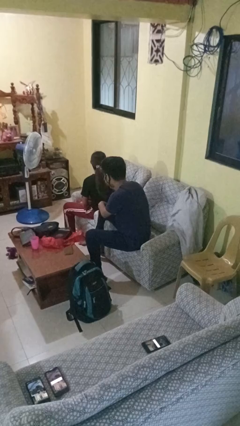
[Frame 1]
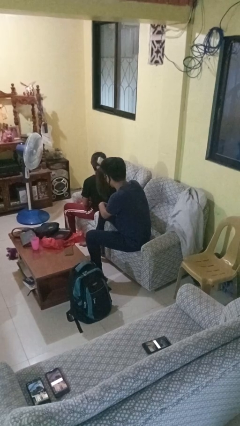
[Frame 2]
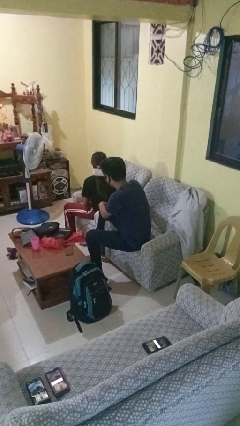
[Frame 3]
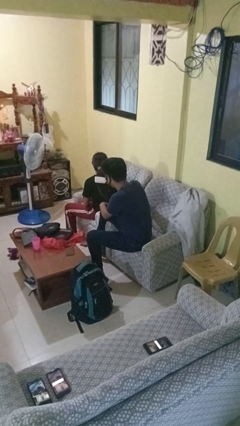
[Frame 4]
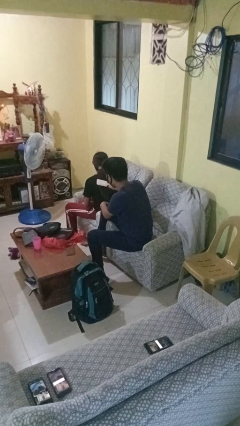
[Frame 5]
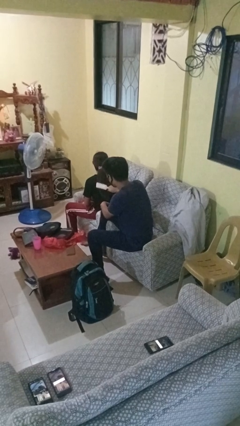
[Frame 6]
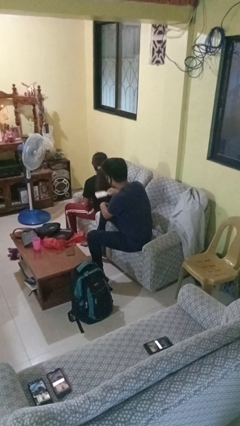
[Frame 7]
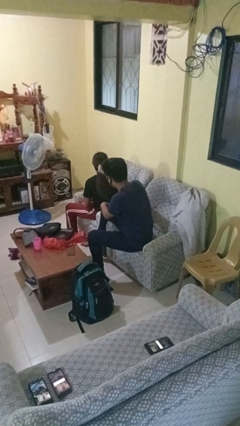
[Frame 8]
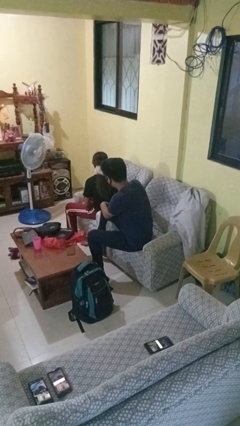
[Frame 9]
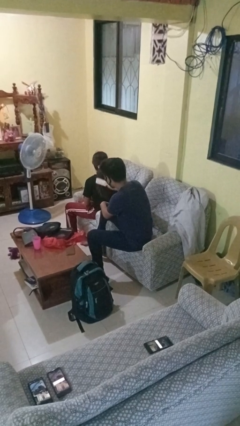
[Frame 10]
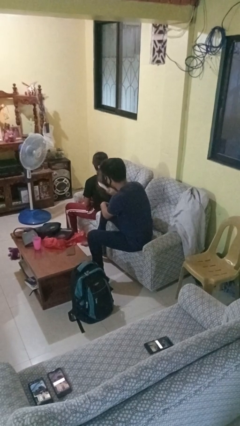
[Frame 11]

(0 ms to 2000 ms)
person brushes hair of person

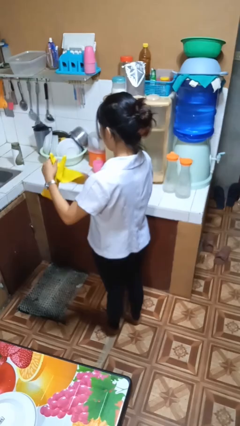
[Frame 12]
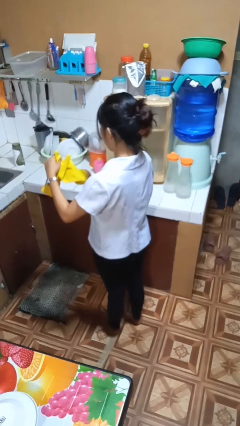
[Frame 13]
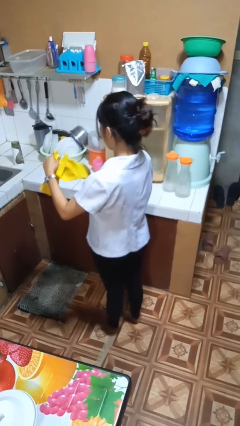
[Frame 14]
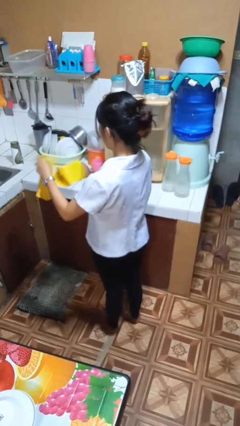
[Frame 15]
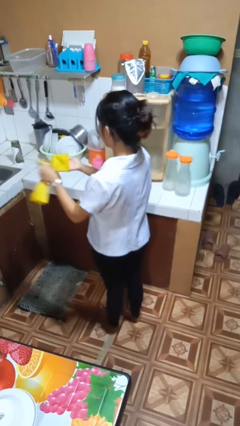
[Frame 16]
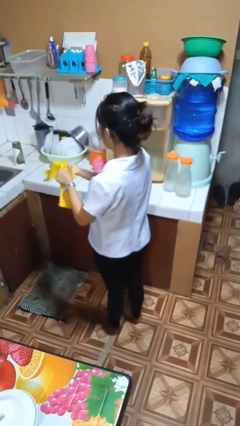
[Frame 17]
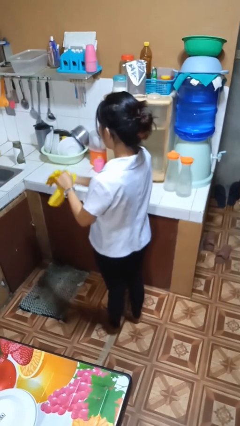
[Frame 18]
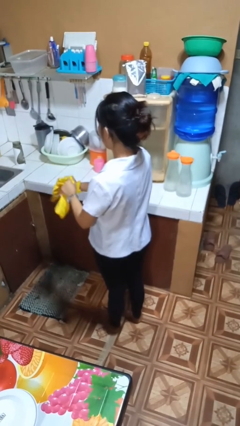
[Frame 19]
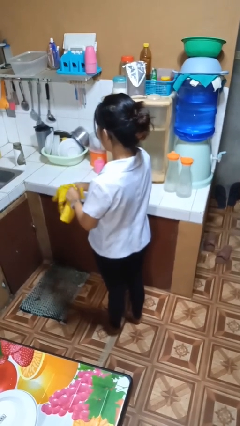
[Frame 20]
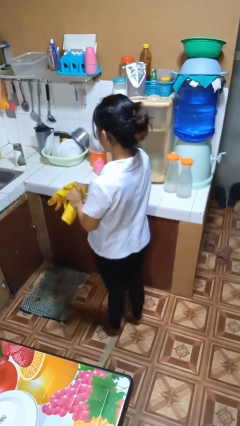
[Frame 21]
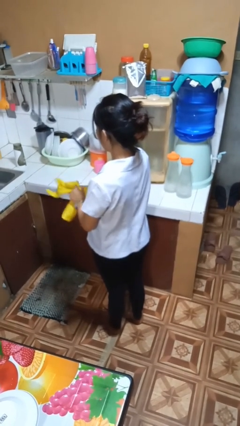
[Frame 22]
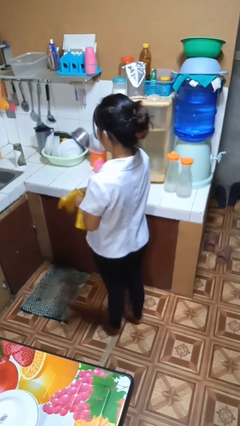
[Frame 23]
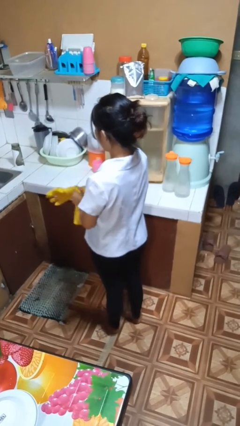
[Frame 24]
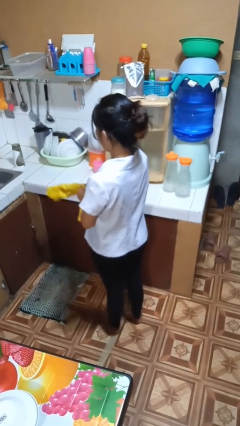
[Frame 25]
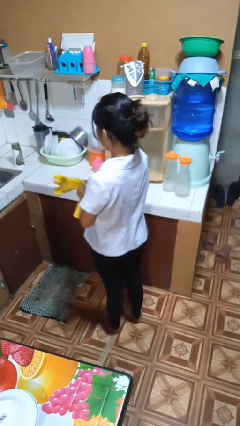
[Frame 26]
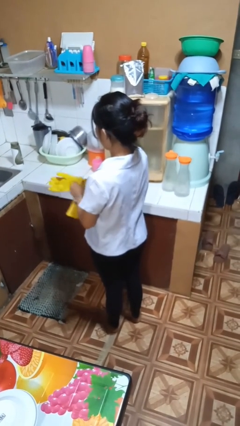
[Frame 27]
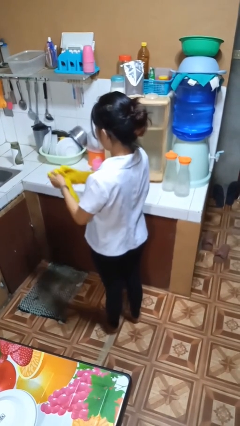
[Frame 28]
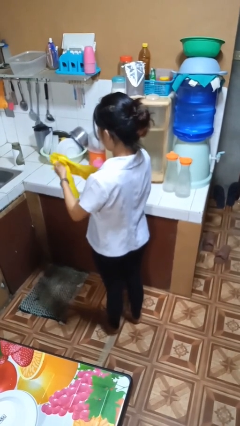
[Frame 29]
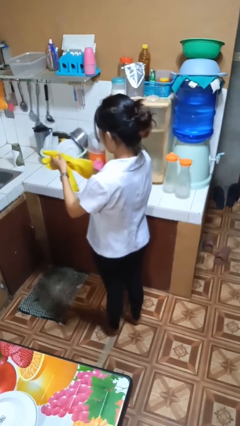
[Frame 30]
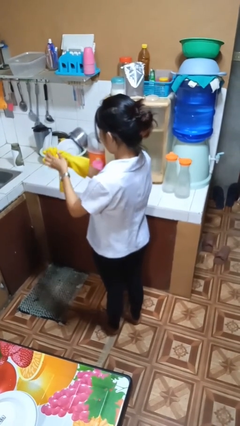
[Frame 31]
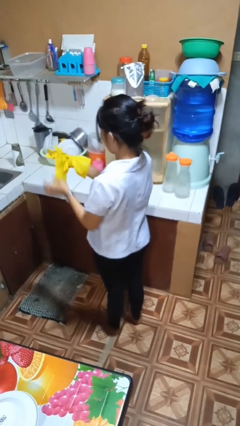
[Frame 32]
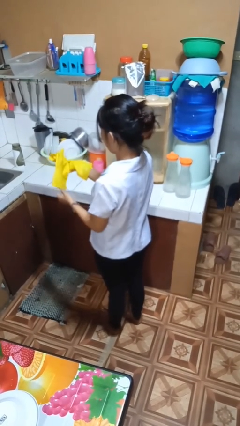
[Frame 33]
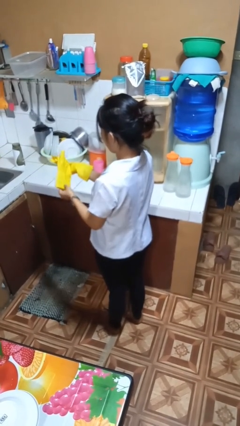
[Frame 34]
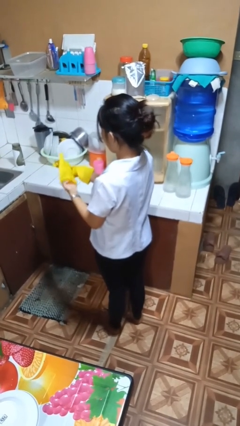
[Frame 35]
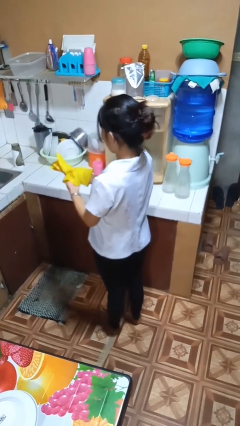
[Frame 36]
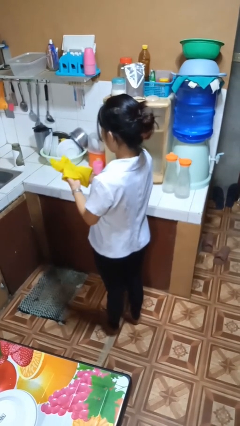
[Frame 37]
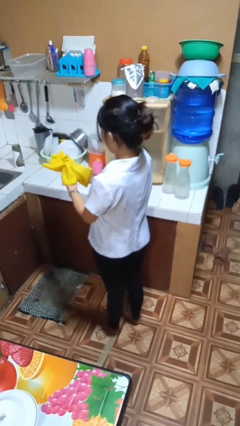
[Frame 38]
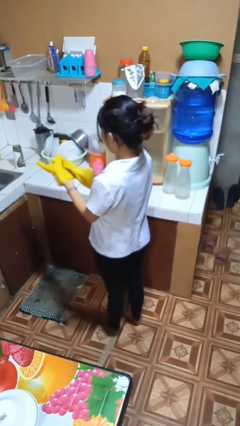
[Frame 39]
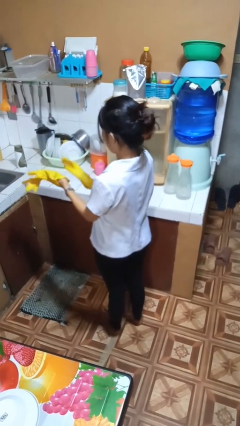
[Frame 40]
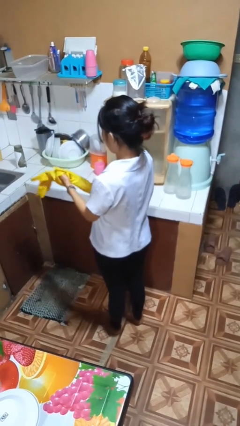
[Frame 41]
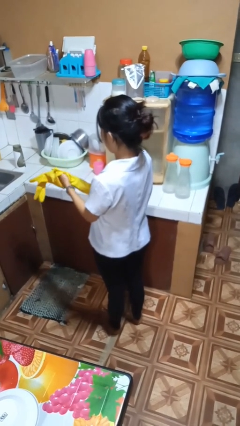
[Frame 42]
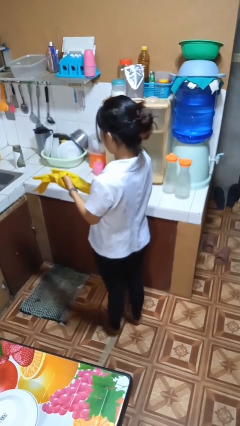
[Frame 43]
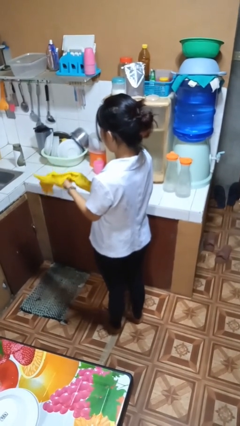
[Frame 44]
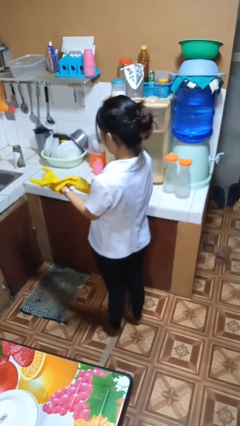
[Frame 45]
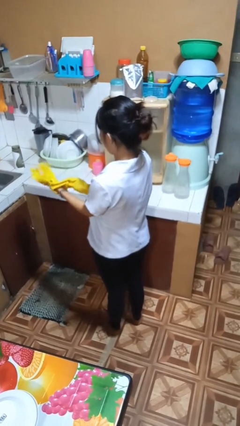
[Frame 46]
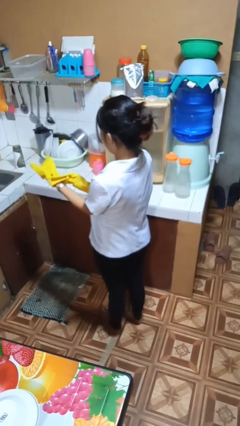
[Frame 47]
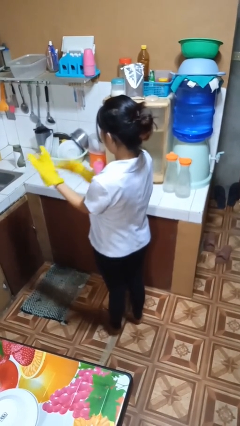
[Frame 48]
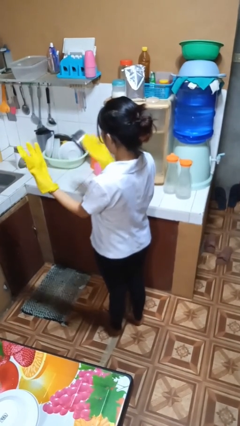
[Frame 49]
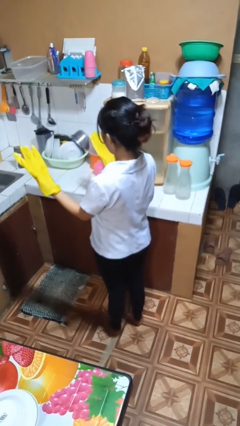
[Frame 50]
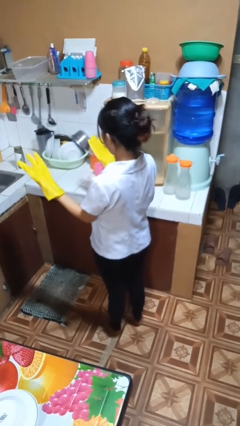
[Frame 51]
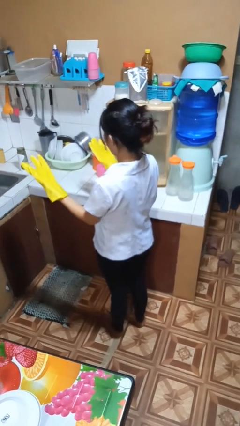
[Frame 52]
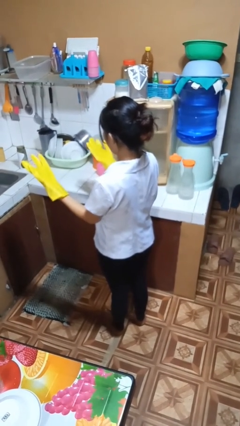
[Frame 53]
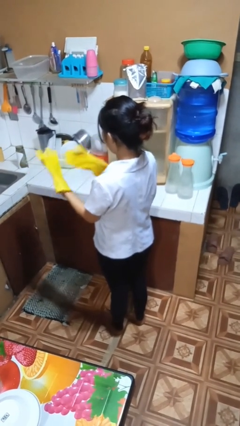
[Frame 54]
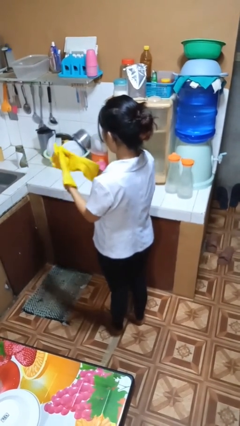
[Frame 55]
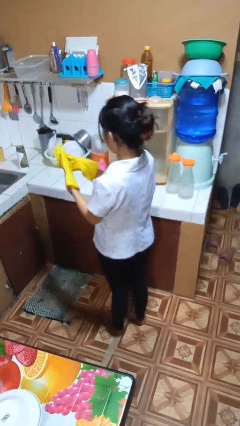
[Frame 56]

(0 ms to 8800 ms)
person puts on gloves

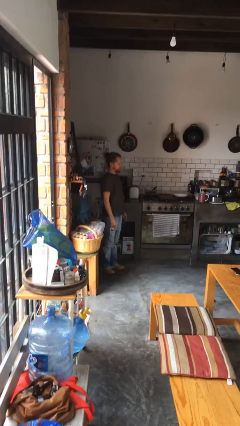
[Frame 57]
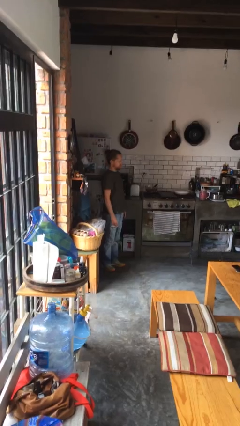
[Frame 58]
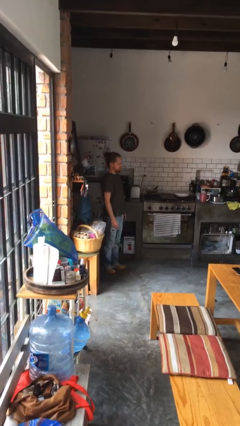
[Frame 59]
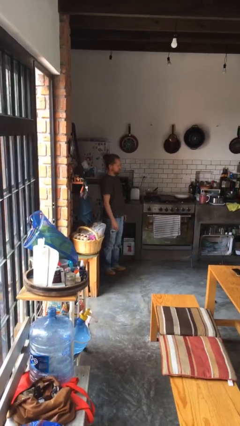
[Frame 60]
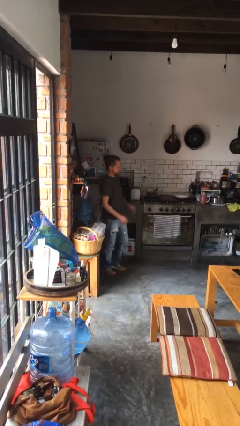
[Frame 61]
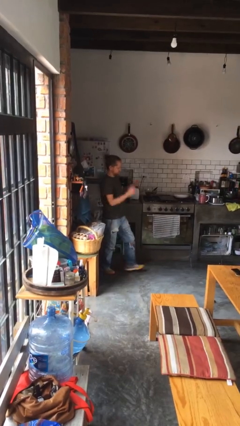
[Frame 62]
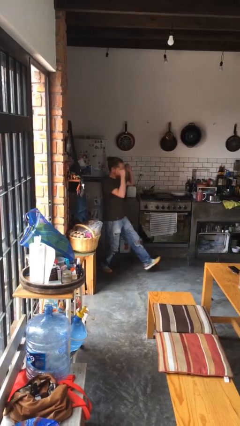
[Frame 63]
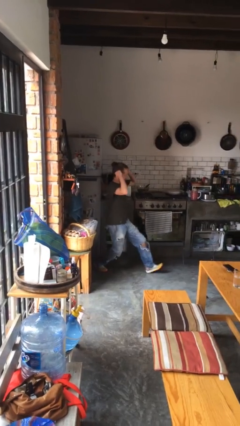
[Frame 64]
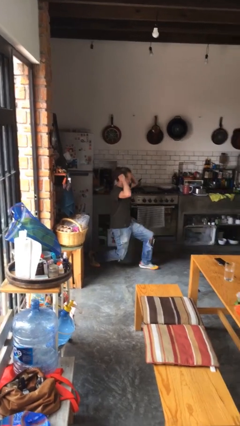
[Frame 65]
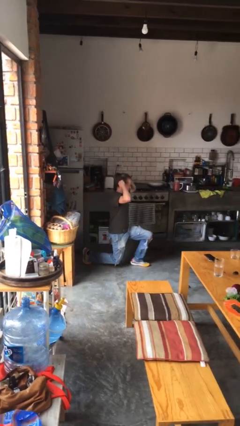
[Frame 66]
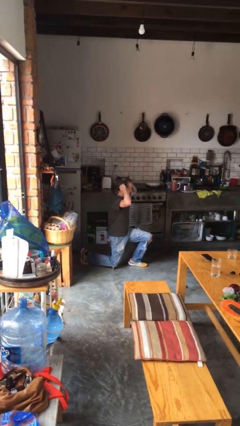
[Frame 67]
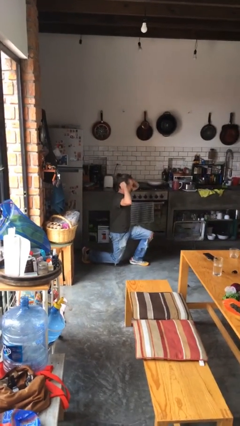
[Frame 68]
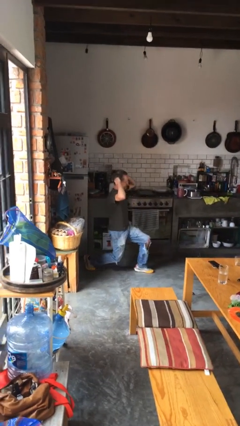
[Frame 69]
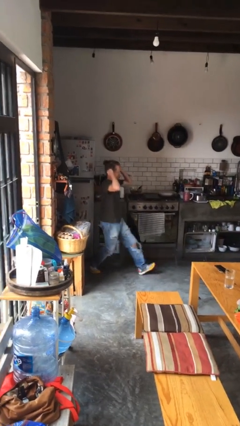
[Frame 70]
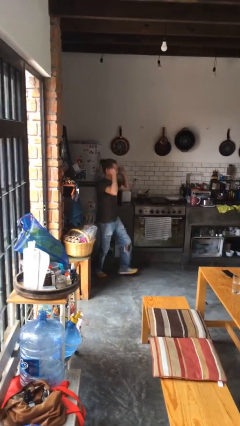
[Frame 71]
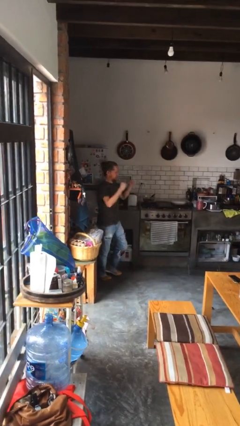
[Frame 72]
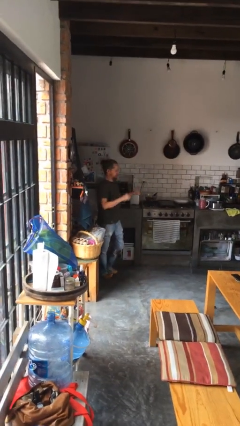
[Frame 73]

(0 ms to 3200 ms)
person exercises with lunges

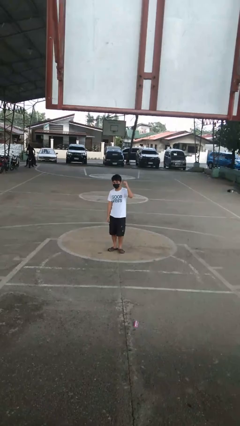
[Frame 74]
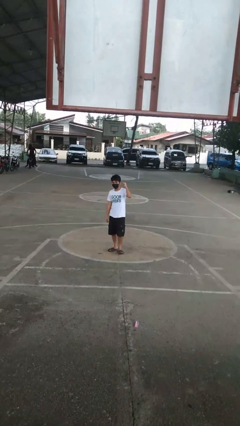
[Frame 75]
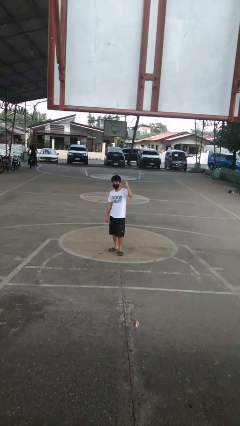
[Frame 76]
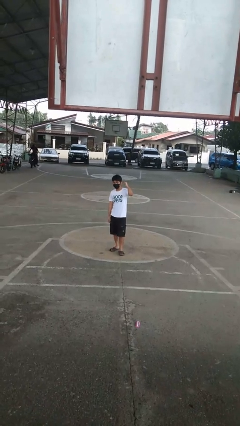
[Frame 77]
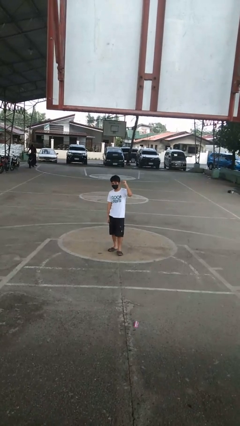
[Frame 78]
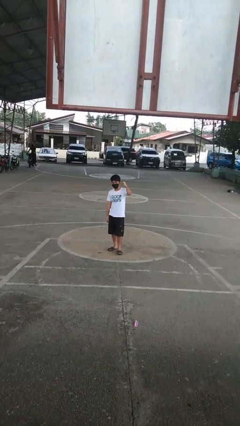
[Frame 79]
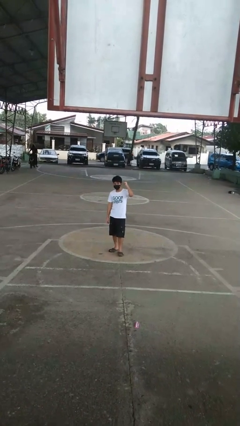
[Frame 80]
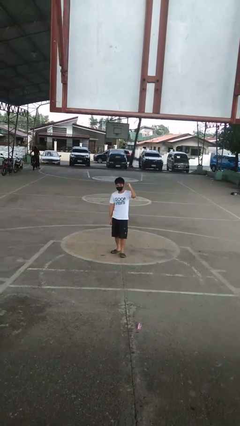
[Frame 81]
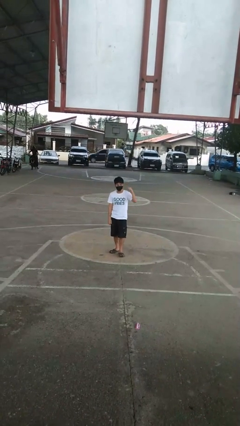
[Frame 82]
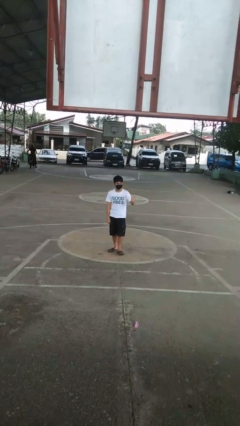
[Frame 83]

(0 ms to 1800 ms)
person gestures behind me

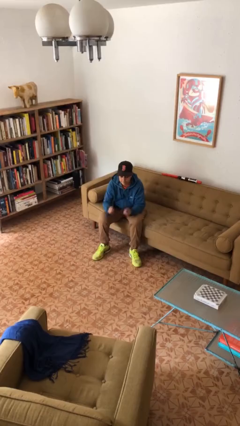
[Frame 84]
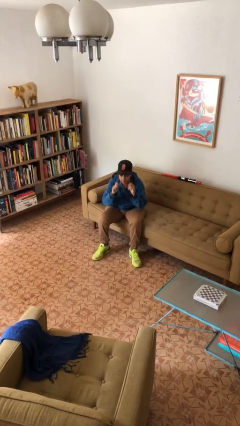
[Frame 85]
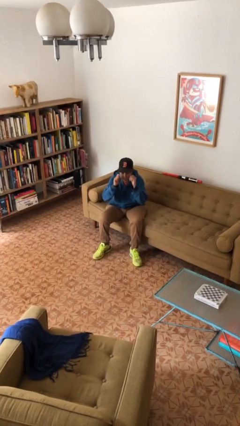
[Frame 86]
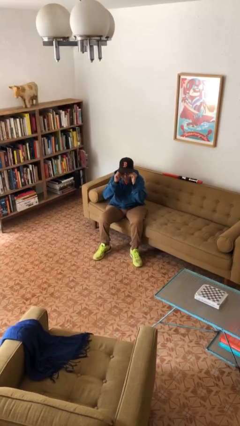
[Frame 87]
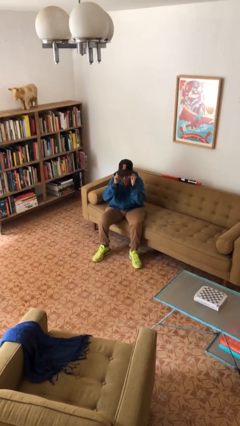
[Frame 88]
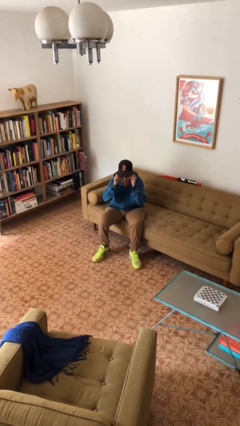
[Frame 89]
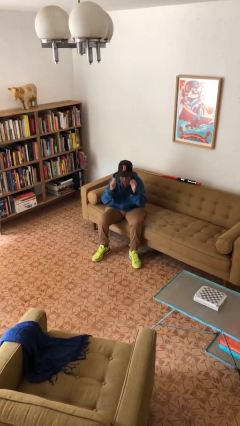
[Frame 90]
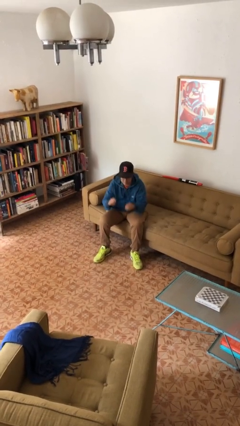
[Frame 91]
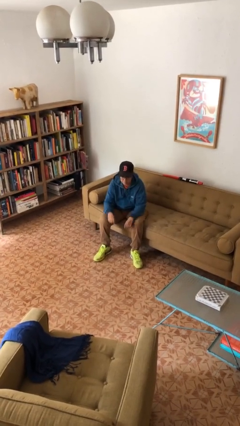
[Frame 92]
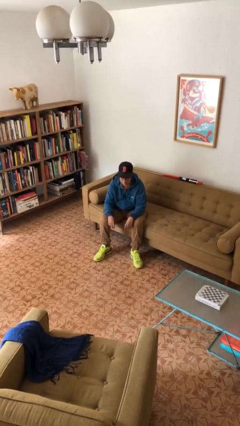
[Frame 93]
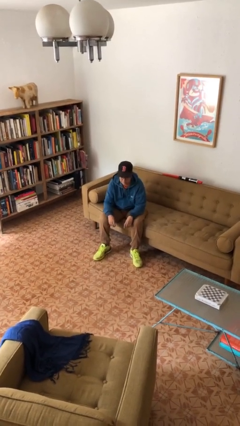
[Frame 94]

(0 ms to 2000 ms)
person puts on glasses
